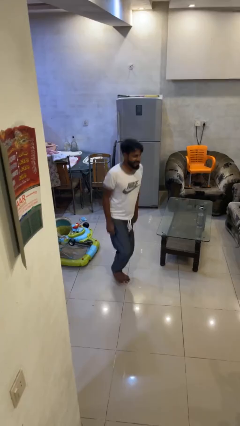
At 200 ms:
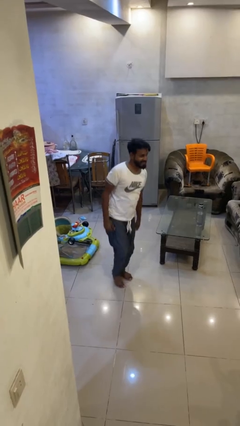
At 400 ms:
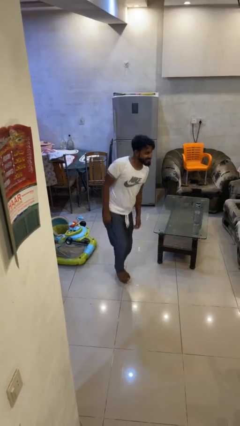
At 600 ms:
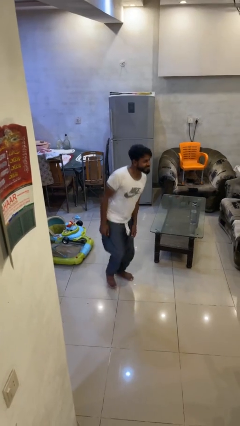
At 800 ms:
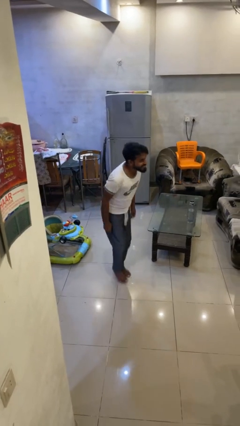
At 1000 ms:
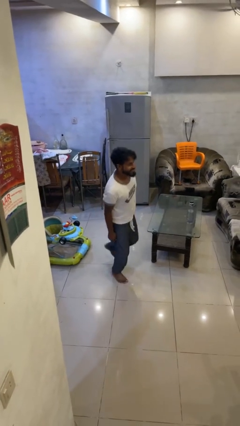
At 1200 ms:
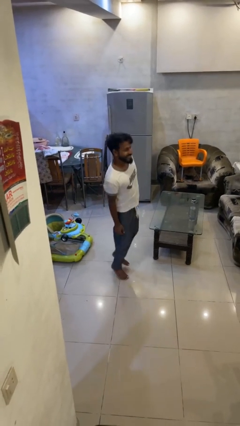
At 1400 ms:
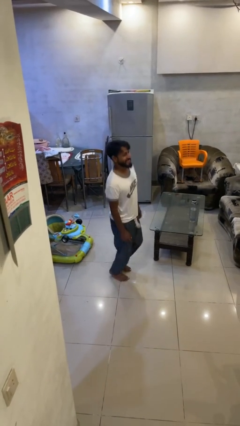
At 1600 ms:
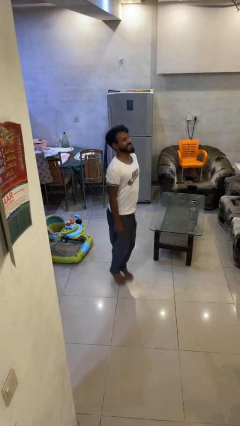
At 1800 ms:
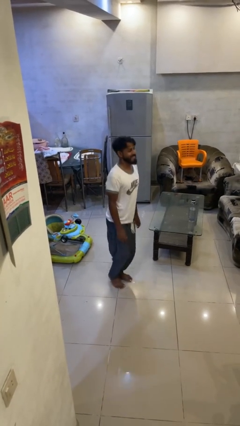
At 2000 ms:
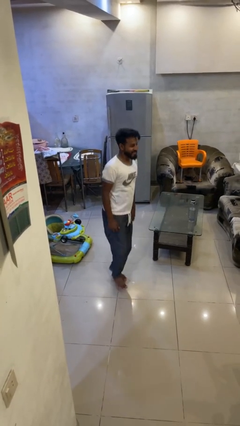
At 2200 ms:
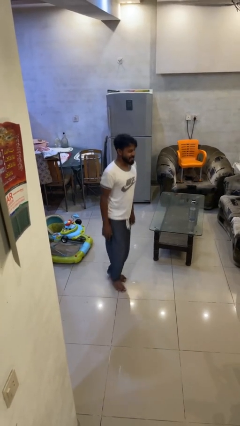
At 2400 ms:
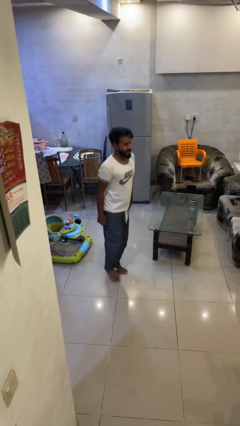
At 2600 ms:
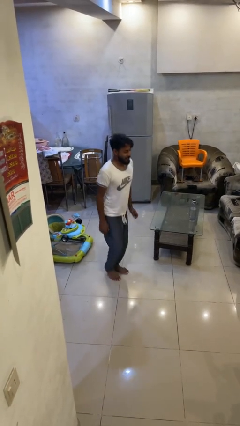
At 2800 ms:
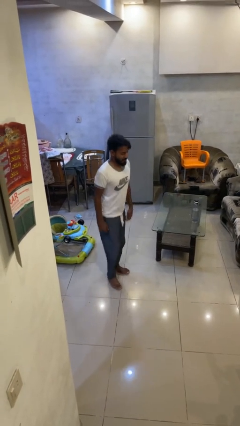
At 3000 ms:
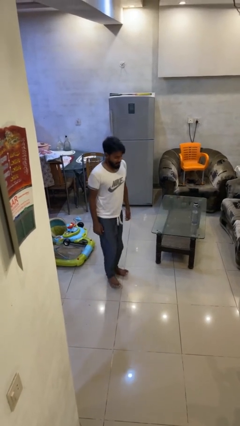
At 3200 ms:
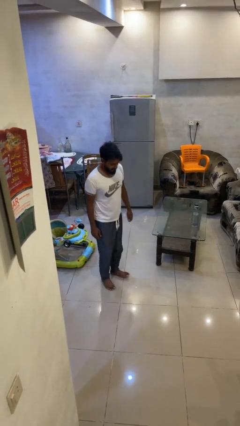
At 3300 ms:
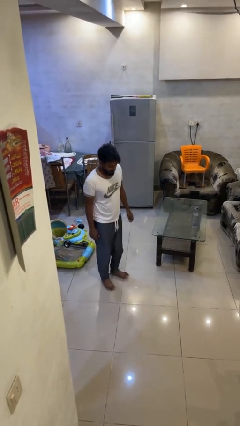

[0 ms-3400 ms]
person jumps

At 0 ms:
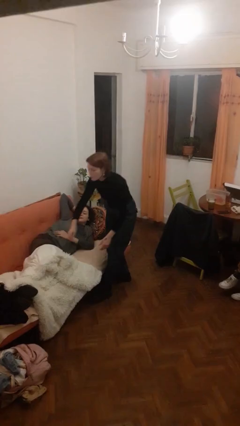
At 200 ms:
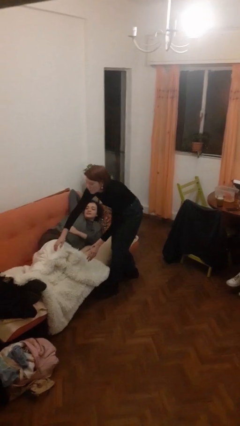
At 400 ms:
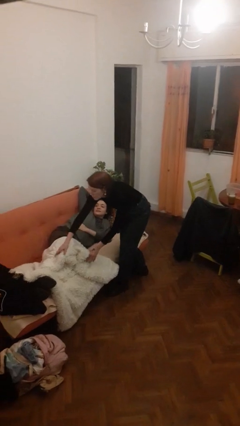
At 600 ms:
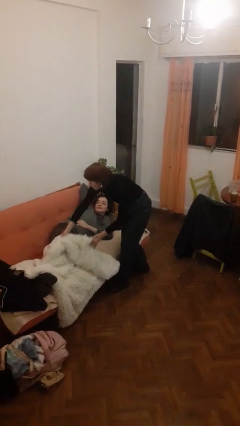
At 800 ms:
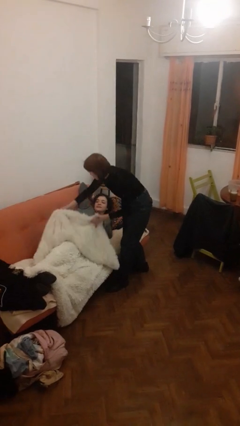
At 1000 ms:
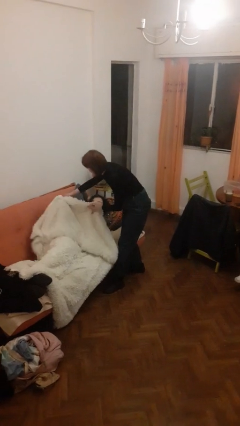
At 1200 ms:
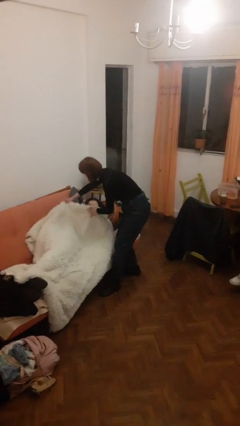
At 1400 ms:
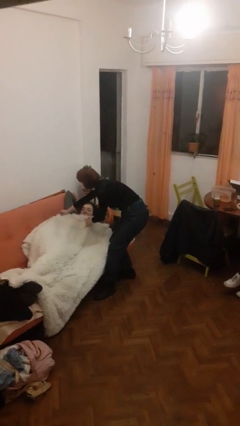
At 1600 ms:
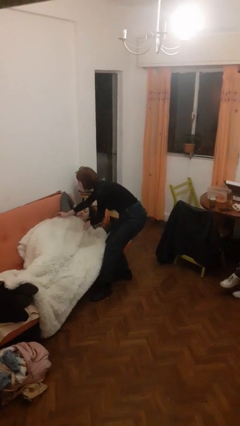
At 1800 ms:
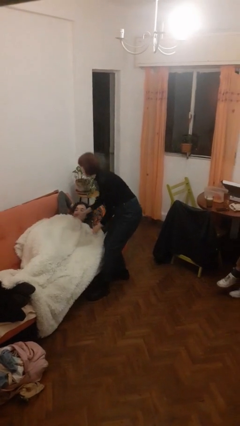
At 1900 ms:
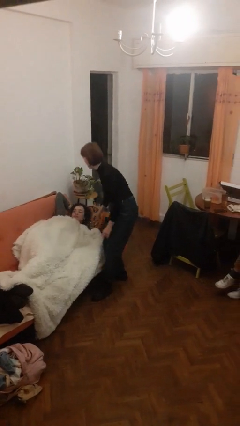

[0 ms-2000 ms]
person covers friend with blanket

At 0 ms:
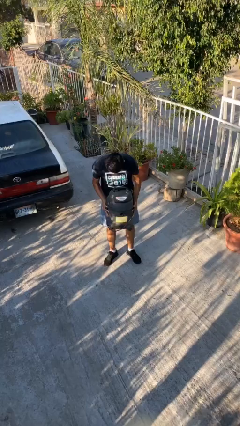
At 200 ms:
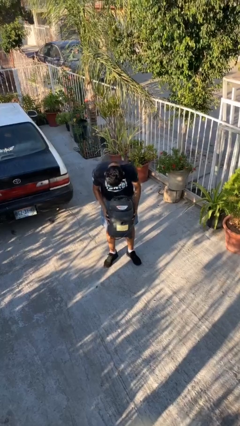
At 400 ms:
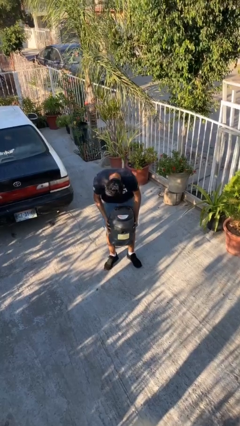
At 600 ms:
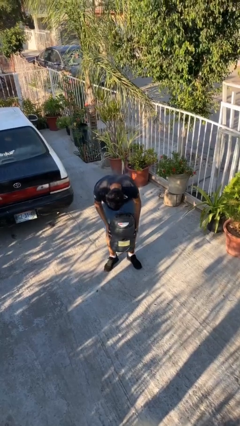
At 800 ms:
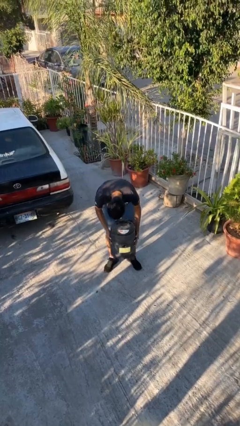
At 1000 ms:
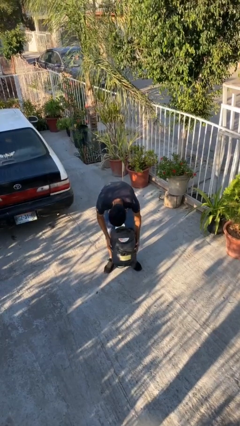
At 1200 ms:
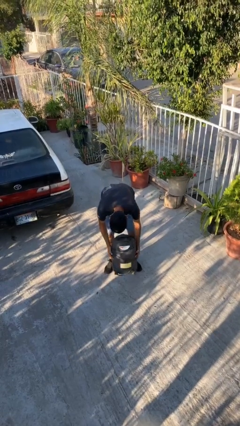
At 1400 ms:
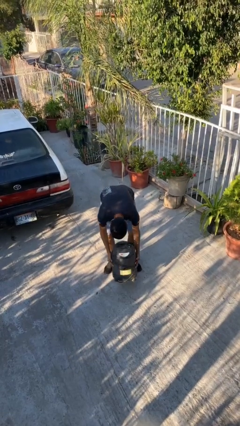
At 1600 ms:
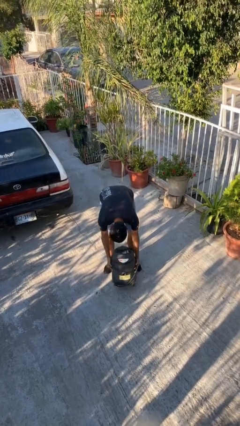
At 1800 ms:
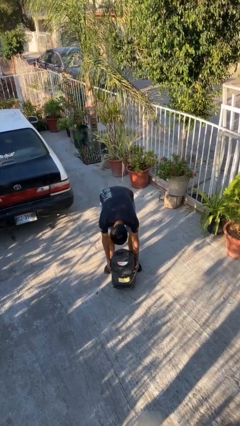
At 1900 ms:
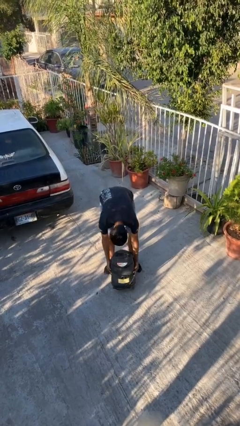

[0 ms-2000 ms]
person puts down object on floor

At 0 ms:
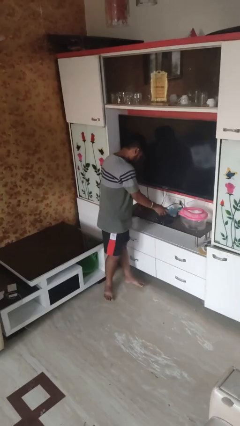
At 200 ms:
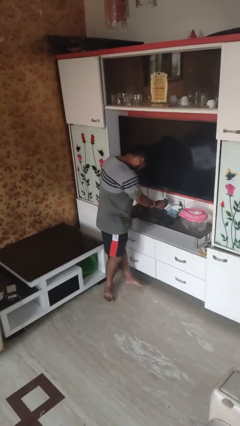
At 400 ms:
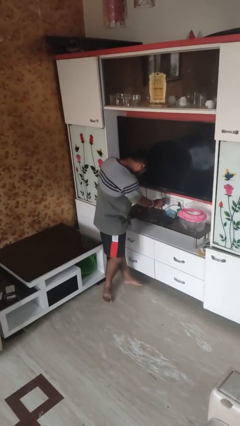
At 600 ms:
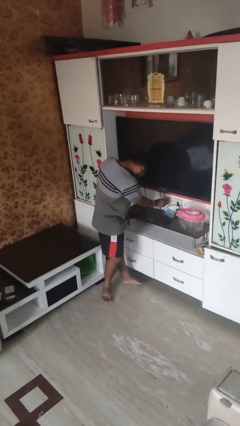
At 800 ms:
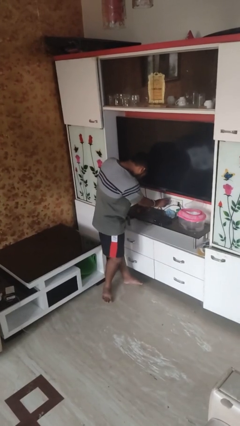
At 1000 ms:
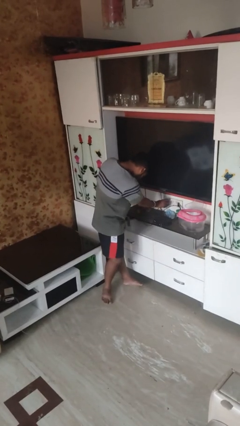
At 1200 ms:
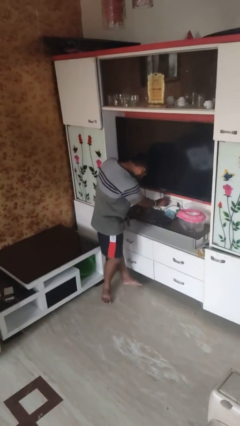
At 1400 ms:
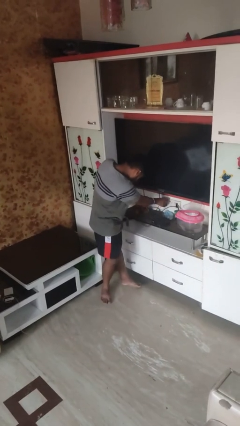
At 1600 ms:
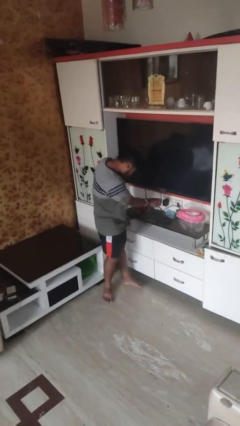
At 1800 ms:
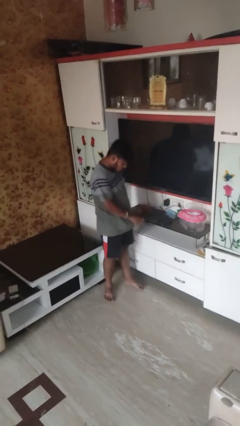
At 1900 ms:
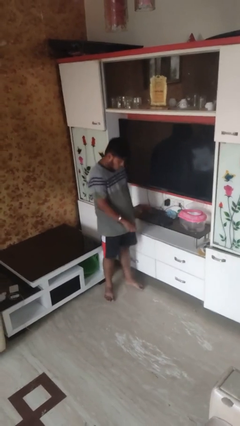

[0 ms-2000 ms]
person plugs into electrical socket

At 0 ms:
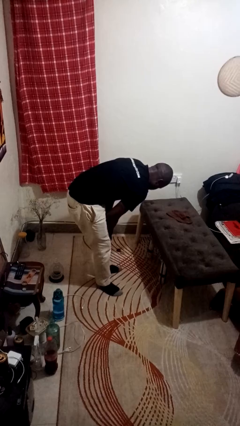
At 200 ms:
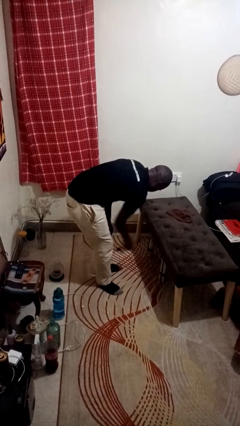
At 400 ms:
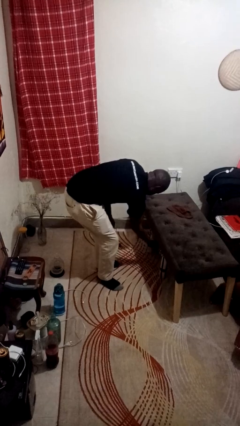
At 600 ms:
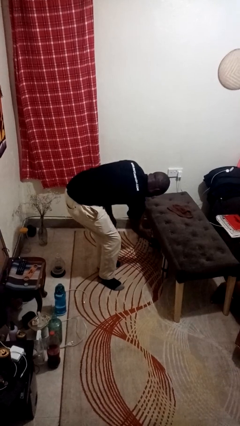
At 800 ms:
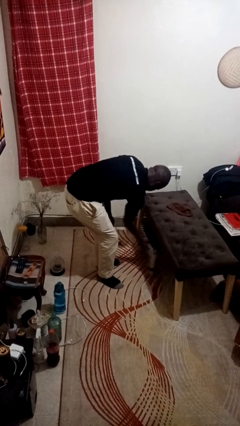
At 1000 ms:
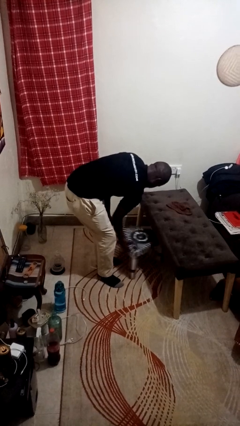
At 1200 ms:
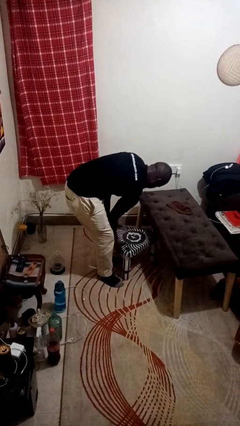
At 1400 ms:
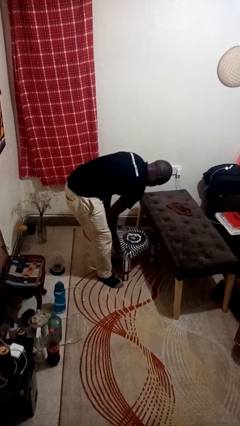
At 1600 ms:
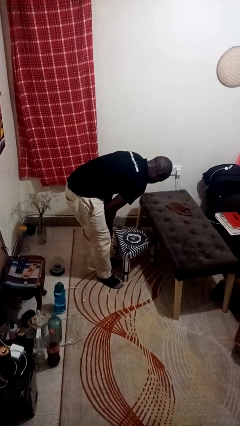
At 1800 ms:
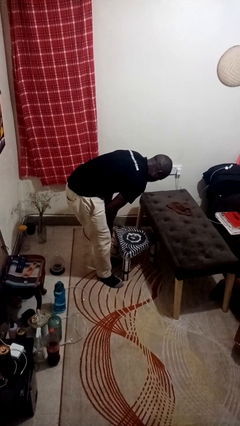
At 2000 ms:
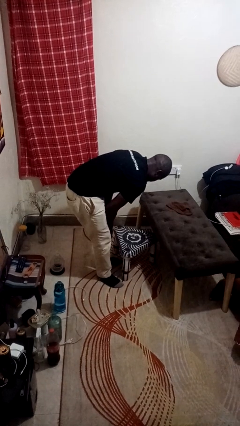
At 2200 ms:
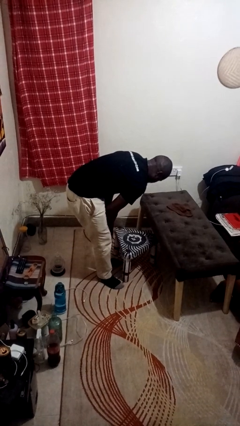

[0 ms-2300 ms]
person pulls out chair

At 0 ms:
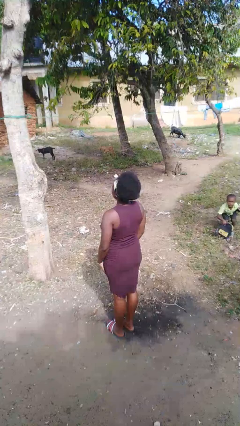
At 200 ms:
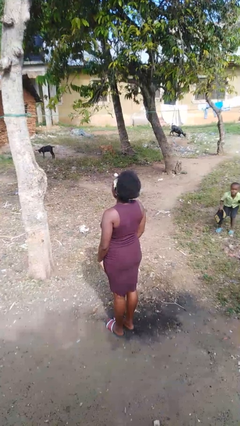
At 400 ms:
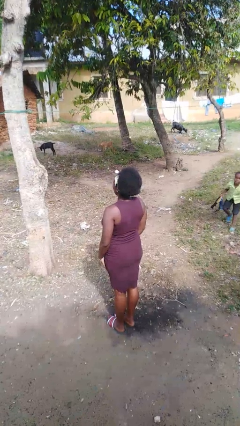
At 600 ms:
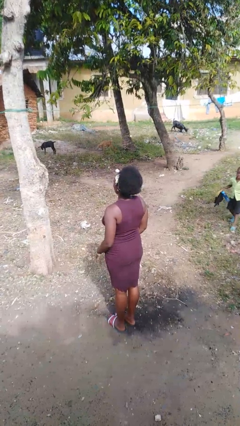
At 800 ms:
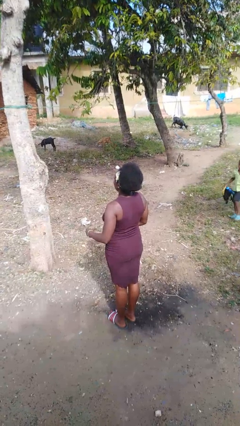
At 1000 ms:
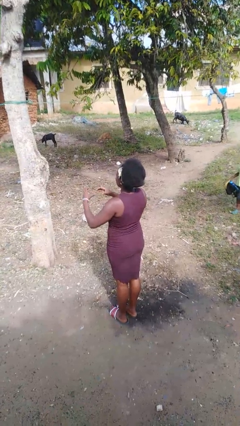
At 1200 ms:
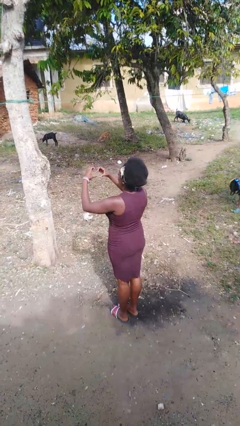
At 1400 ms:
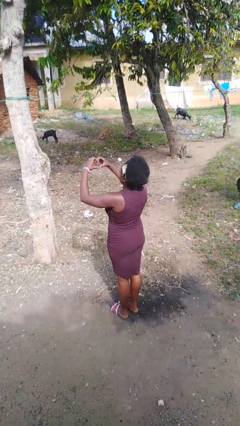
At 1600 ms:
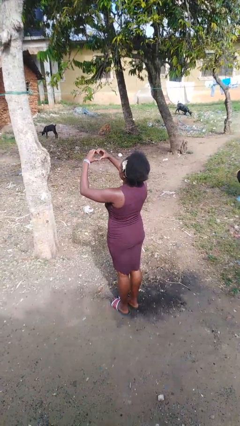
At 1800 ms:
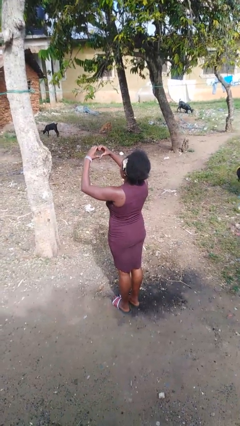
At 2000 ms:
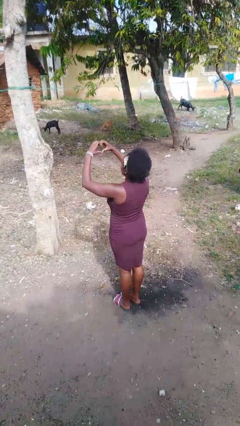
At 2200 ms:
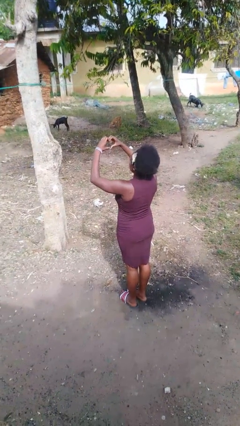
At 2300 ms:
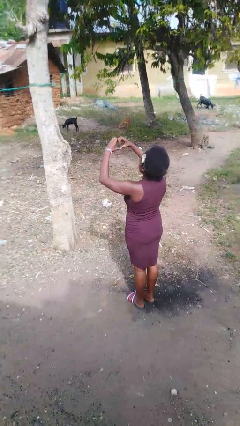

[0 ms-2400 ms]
person gestures heart

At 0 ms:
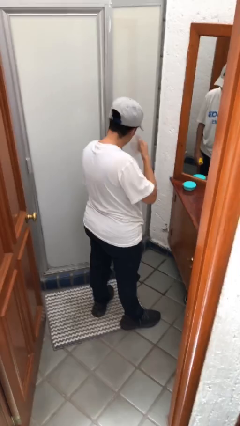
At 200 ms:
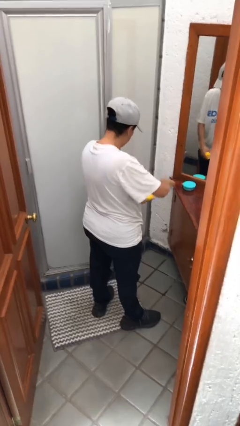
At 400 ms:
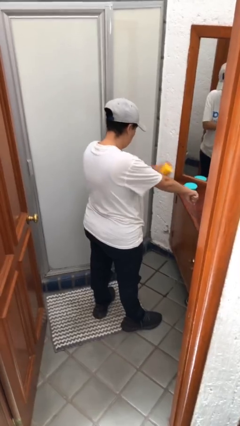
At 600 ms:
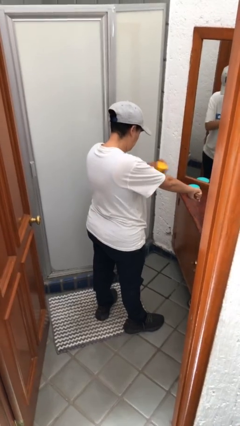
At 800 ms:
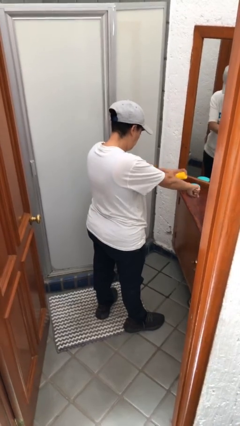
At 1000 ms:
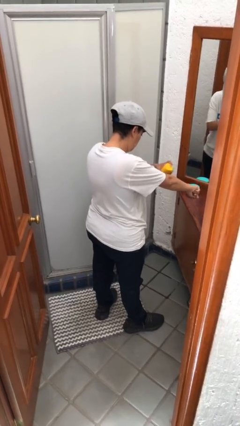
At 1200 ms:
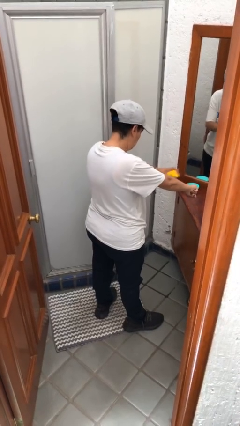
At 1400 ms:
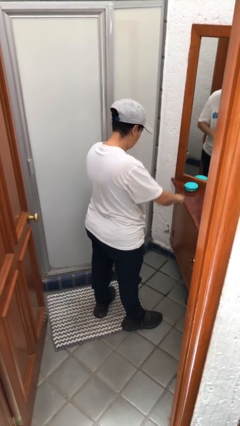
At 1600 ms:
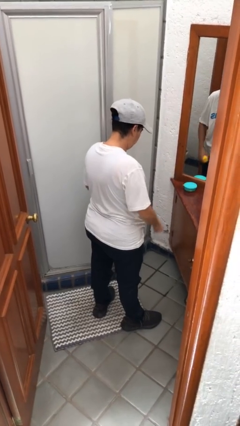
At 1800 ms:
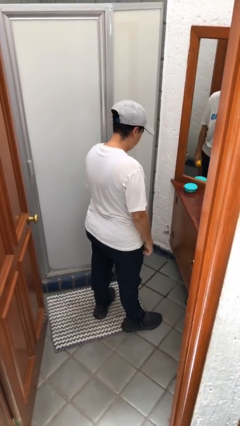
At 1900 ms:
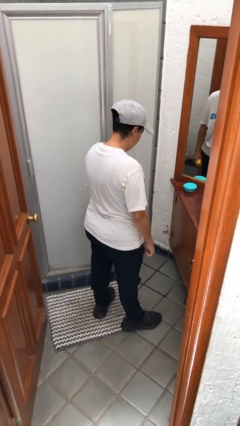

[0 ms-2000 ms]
person applies sunscreen

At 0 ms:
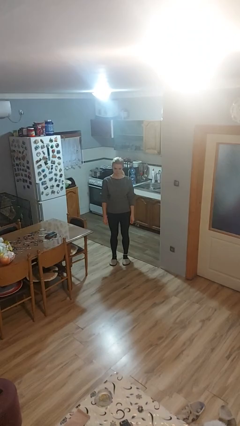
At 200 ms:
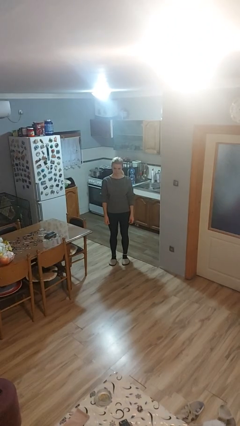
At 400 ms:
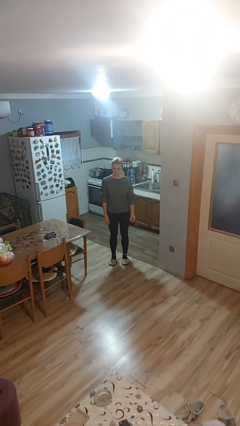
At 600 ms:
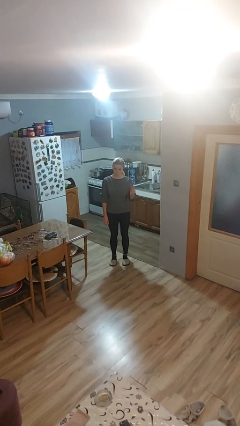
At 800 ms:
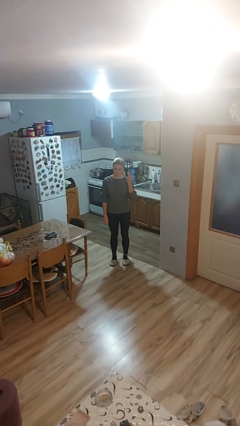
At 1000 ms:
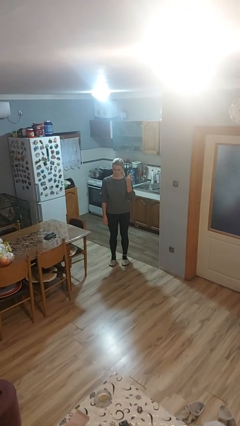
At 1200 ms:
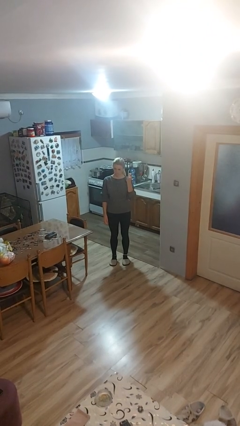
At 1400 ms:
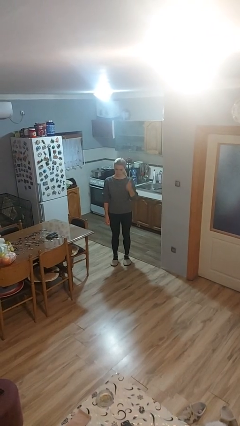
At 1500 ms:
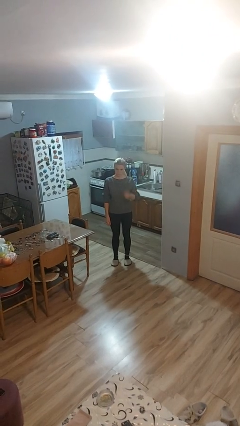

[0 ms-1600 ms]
person snaps fingers
